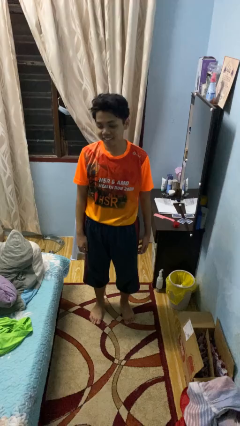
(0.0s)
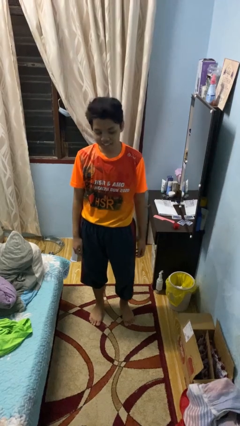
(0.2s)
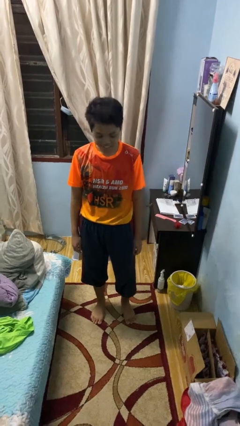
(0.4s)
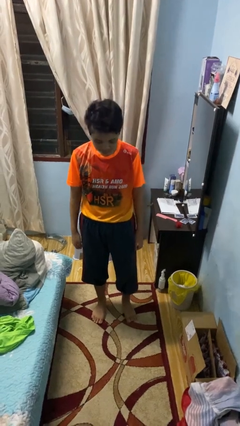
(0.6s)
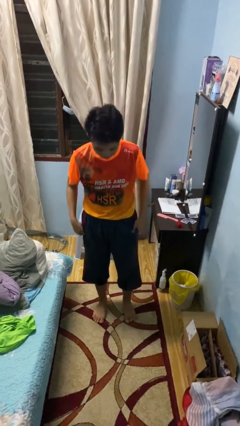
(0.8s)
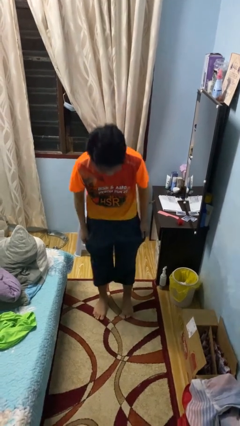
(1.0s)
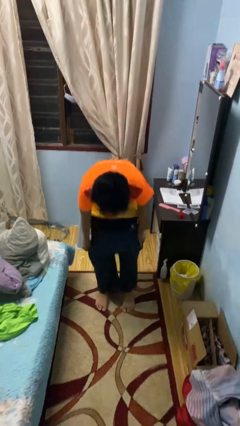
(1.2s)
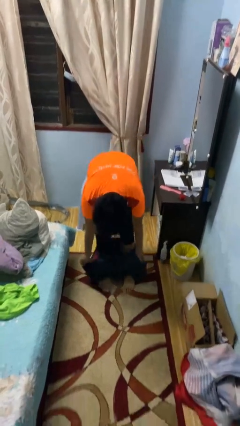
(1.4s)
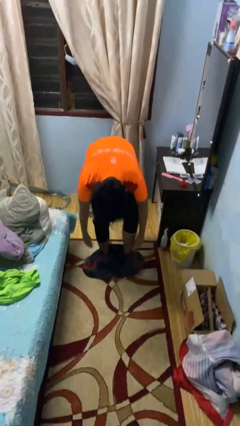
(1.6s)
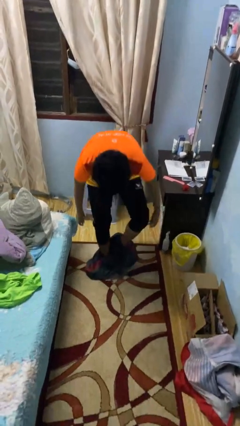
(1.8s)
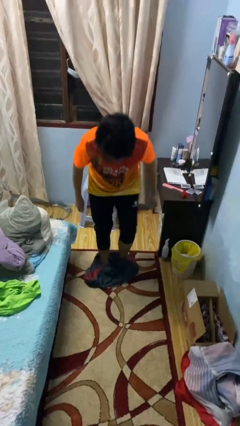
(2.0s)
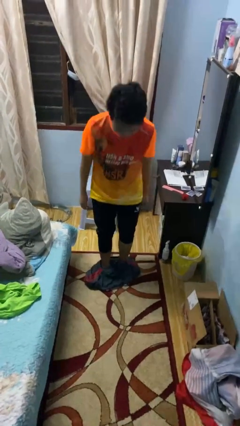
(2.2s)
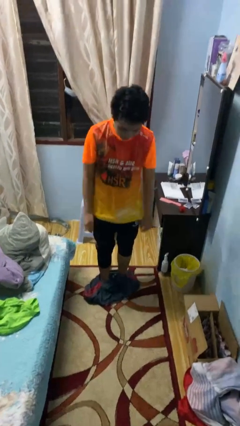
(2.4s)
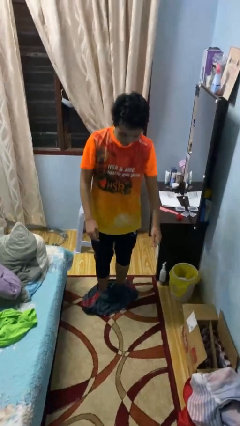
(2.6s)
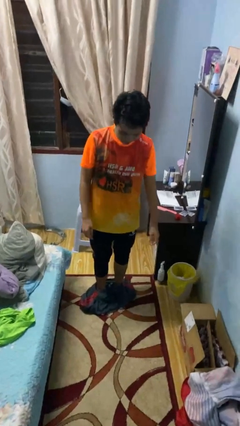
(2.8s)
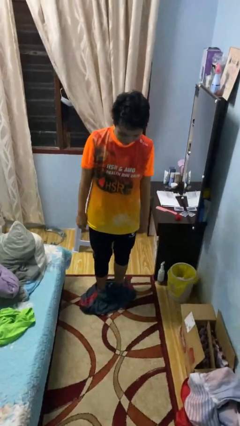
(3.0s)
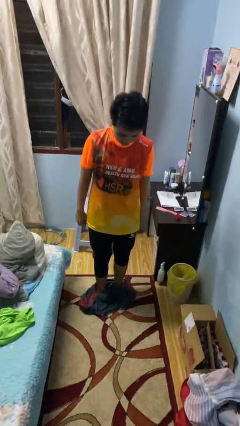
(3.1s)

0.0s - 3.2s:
person takes off pants

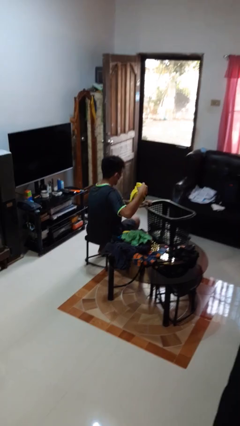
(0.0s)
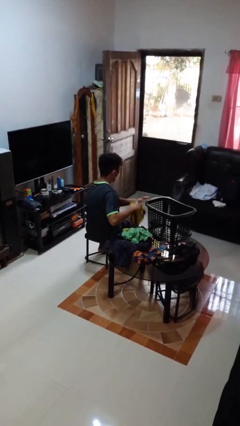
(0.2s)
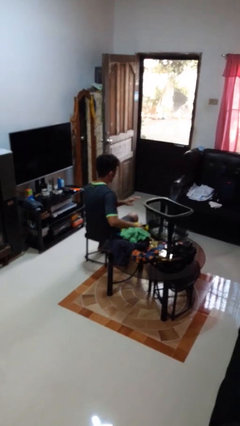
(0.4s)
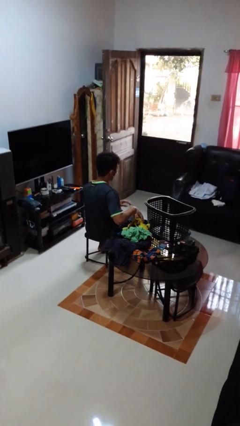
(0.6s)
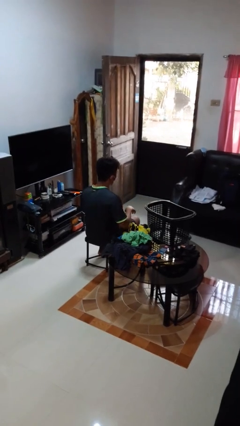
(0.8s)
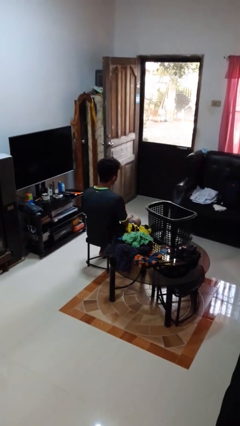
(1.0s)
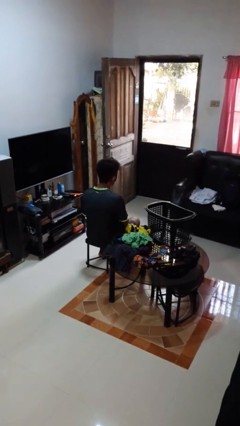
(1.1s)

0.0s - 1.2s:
person takes object from basket

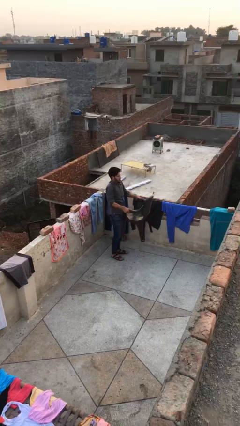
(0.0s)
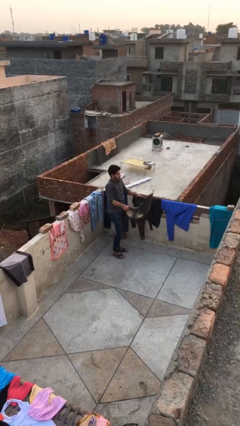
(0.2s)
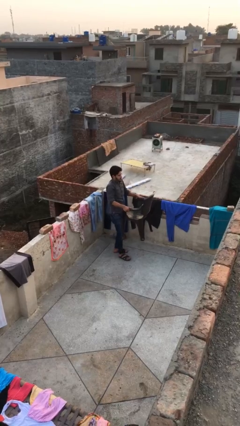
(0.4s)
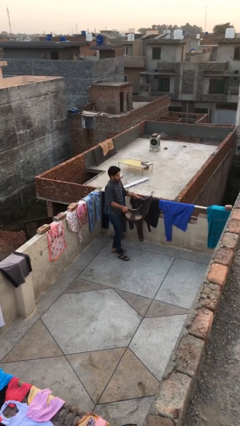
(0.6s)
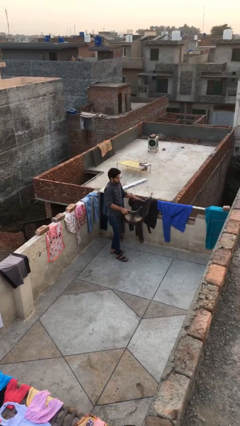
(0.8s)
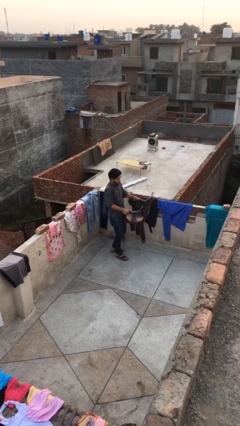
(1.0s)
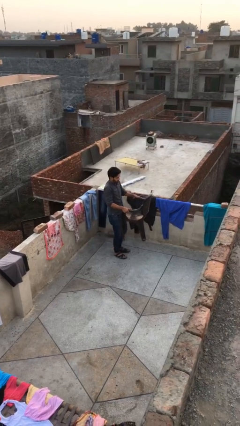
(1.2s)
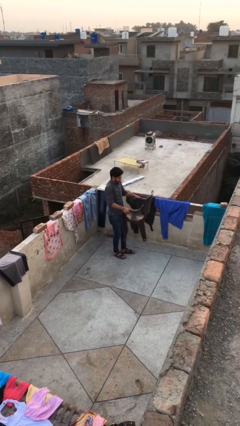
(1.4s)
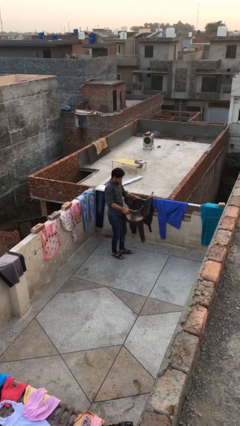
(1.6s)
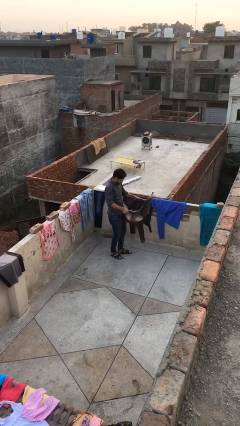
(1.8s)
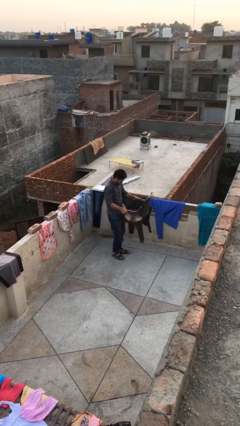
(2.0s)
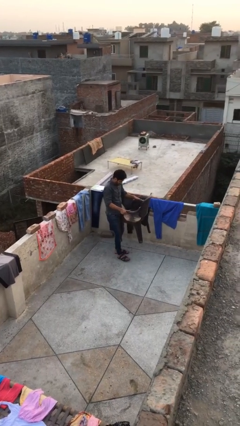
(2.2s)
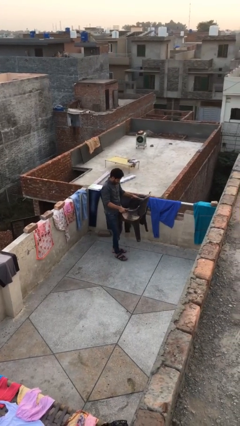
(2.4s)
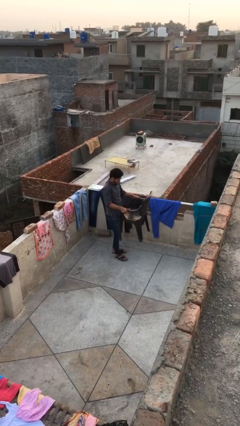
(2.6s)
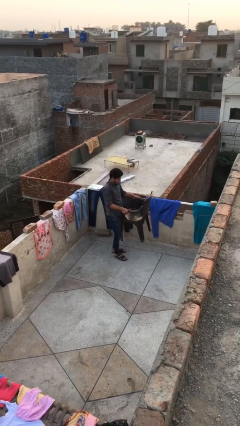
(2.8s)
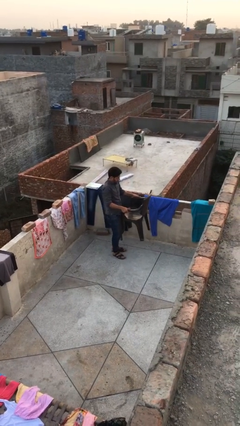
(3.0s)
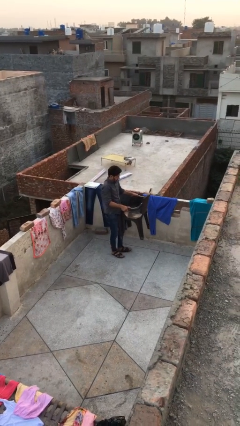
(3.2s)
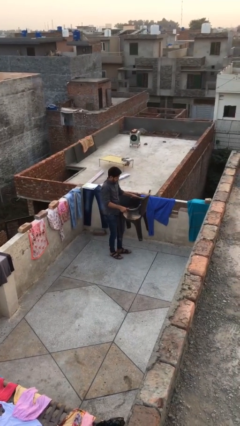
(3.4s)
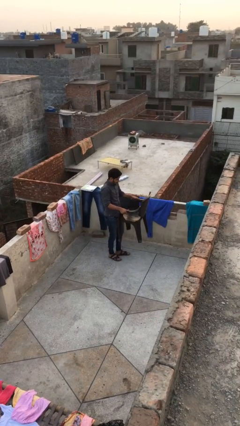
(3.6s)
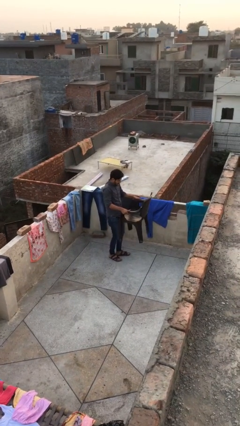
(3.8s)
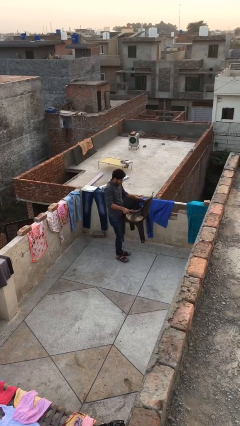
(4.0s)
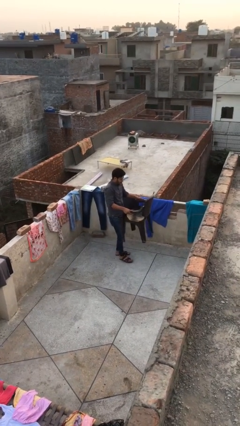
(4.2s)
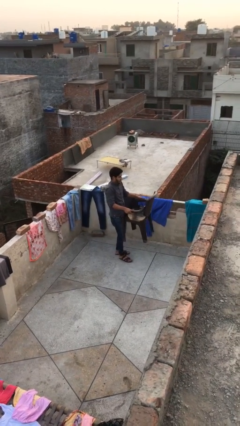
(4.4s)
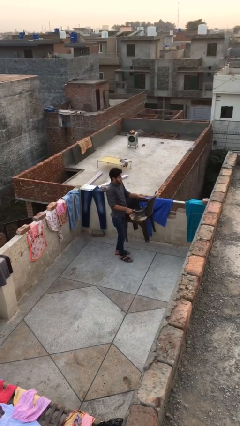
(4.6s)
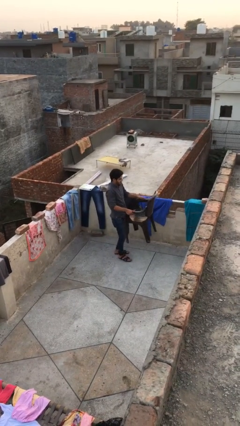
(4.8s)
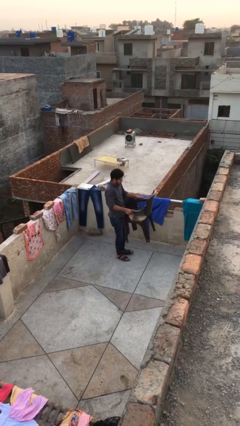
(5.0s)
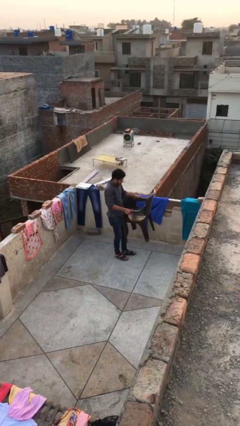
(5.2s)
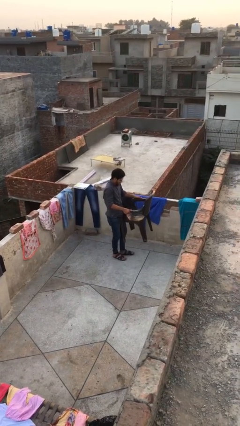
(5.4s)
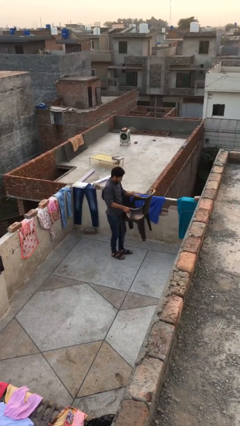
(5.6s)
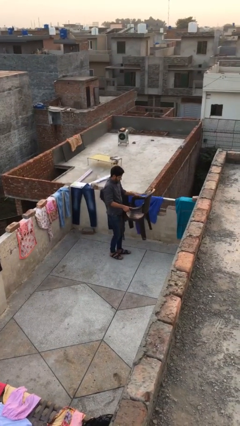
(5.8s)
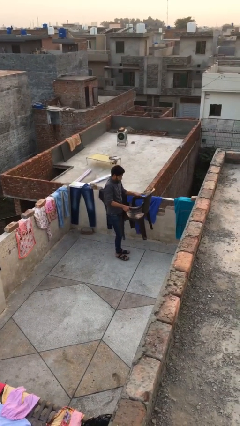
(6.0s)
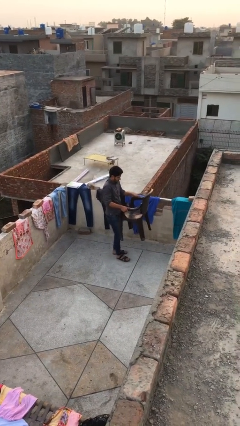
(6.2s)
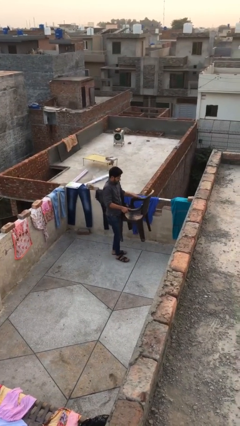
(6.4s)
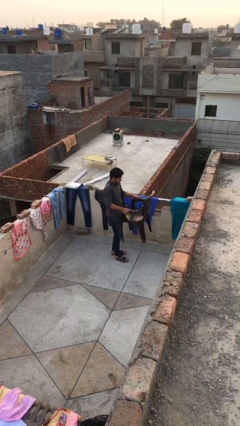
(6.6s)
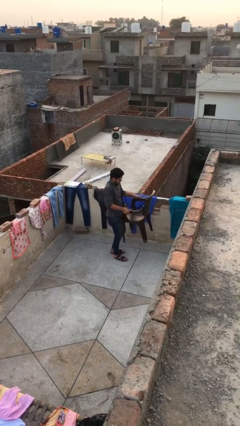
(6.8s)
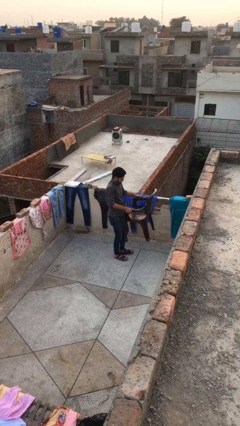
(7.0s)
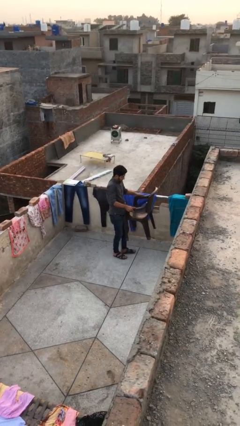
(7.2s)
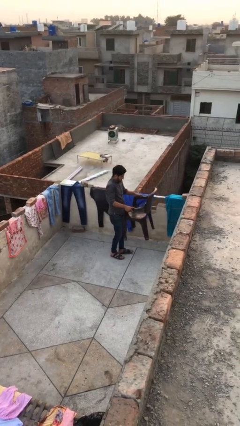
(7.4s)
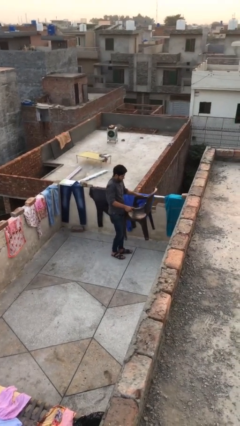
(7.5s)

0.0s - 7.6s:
person carries heavy object

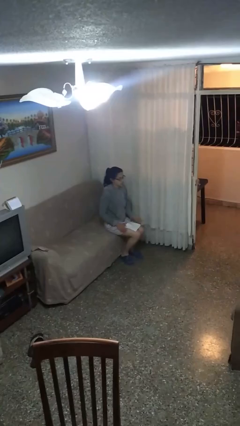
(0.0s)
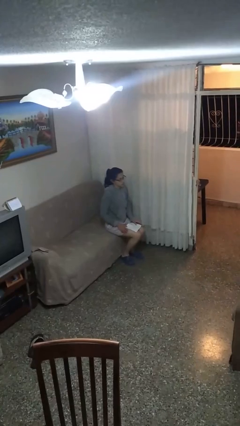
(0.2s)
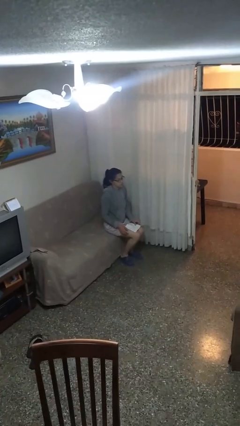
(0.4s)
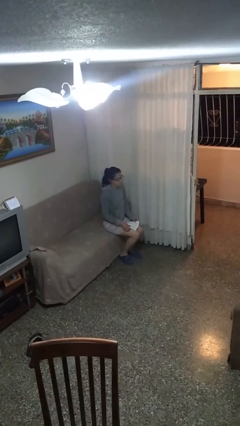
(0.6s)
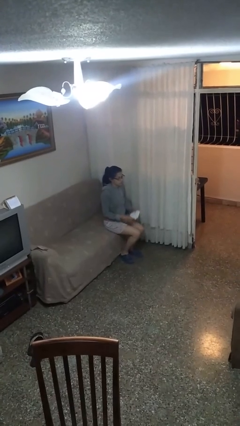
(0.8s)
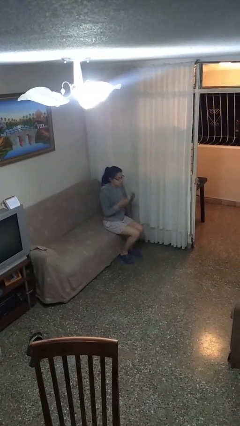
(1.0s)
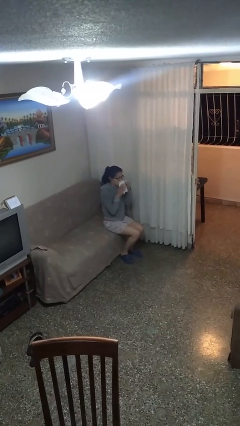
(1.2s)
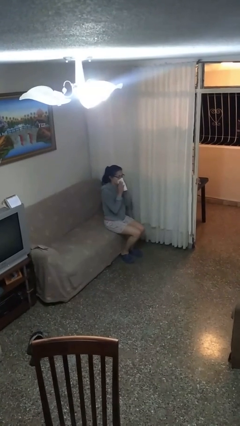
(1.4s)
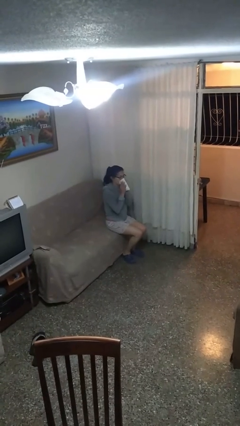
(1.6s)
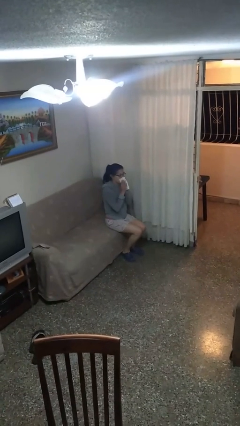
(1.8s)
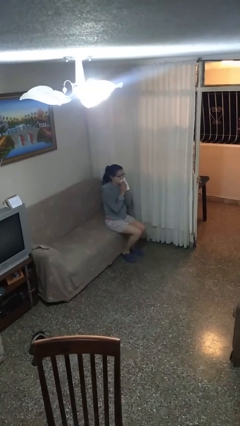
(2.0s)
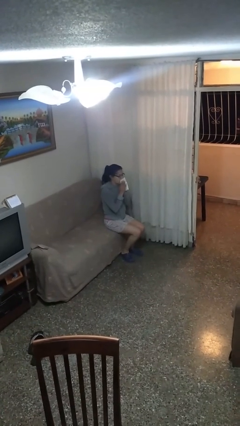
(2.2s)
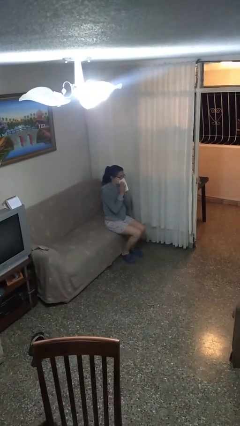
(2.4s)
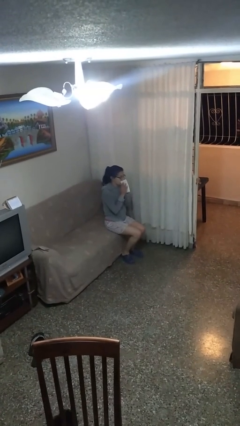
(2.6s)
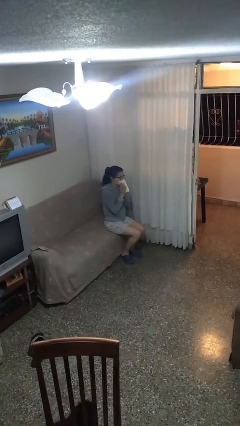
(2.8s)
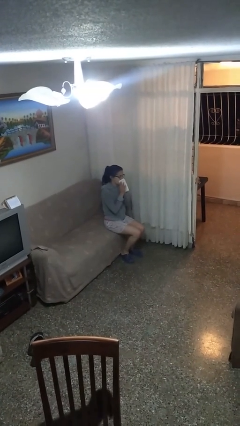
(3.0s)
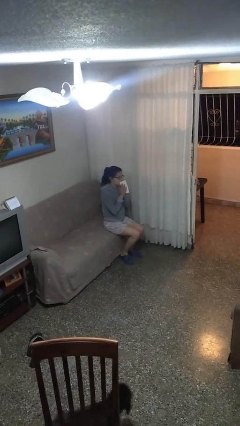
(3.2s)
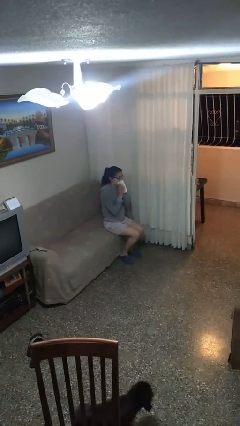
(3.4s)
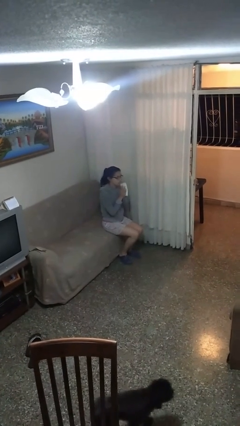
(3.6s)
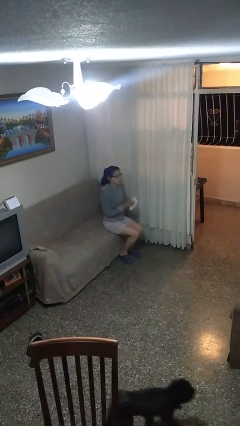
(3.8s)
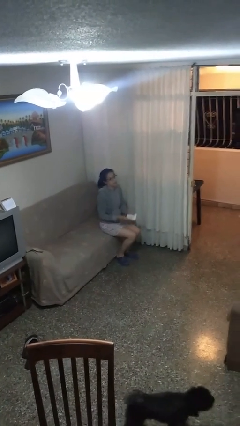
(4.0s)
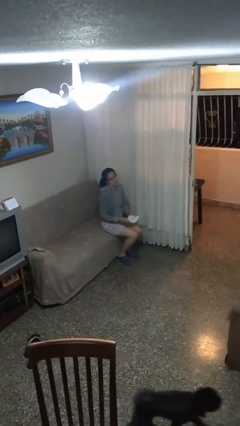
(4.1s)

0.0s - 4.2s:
person wipes mouth with napkin

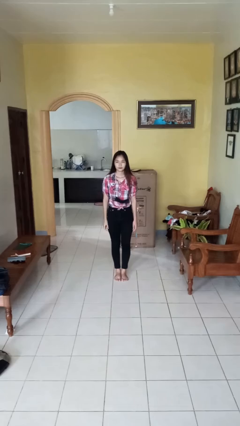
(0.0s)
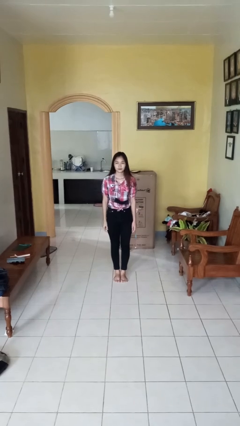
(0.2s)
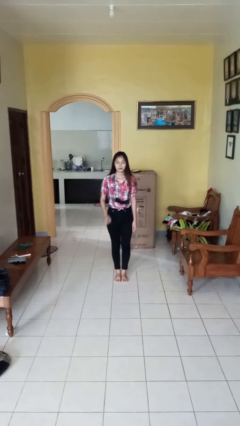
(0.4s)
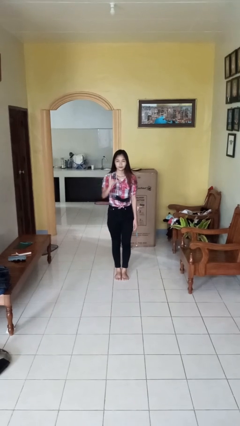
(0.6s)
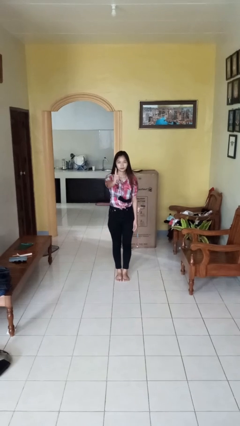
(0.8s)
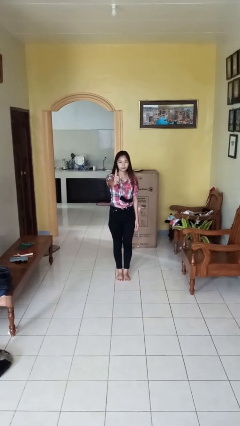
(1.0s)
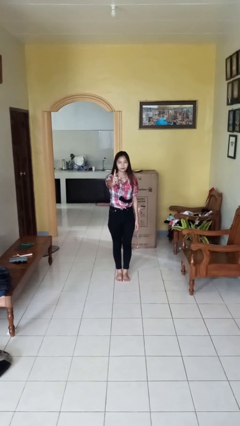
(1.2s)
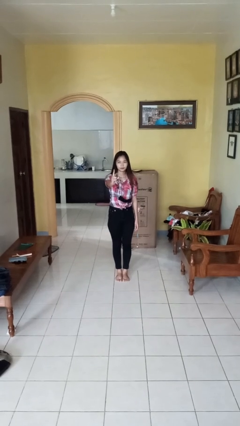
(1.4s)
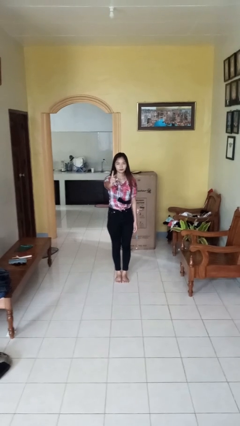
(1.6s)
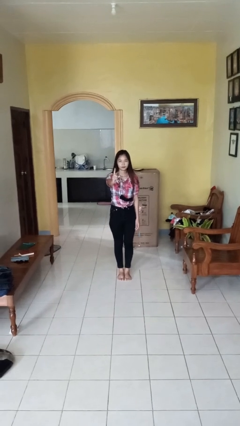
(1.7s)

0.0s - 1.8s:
person gestures number one
